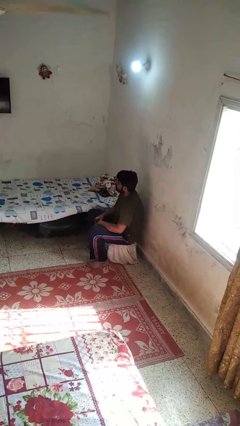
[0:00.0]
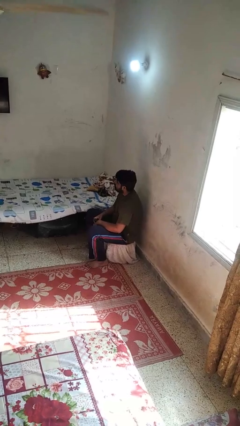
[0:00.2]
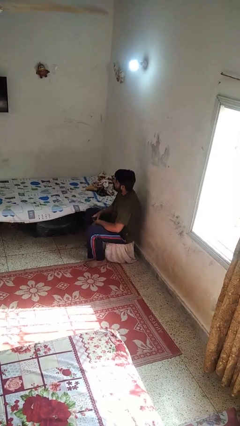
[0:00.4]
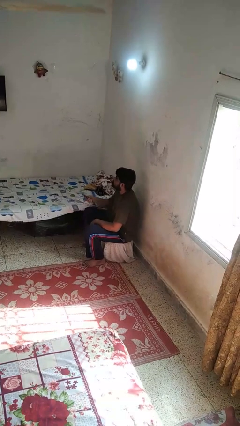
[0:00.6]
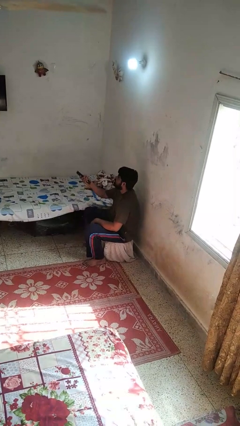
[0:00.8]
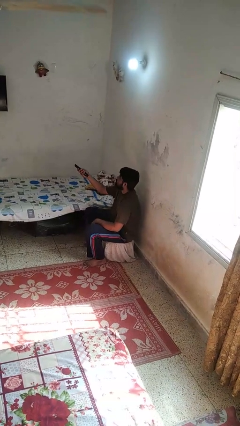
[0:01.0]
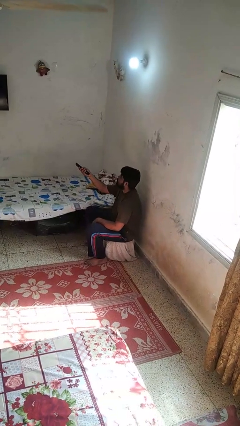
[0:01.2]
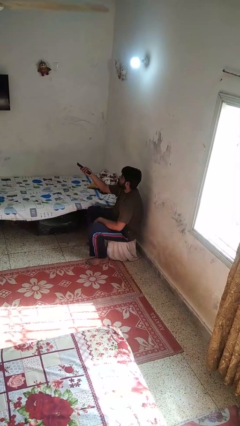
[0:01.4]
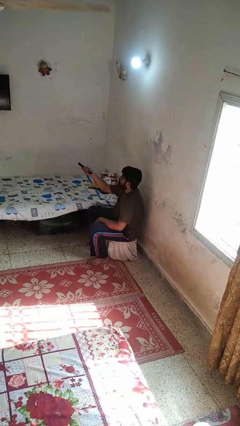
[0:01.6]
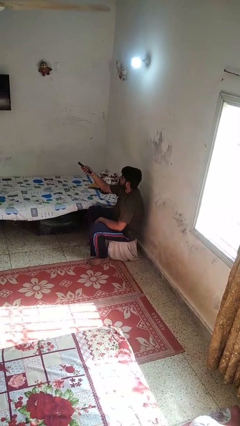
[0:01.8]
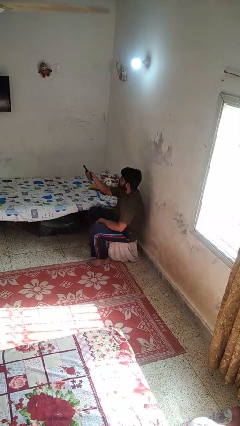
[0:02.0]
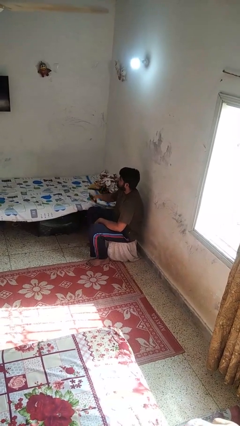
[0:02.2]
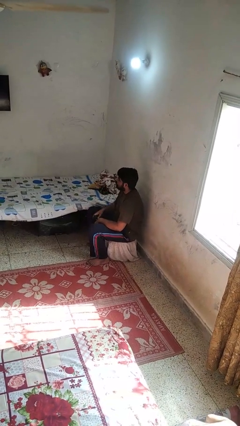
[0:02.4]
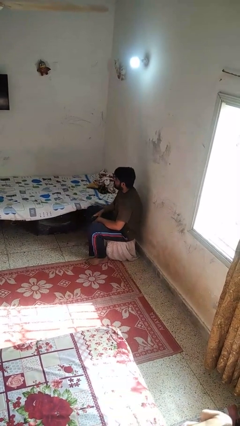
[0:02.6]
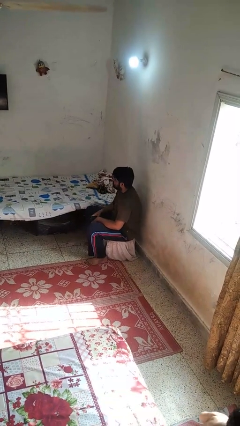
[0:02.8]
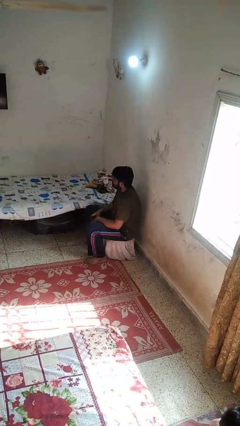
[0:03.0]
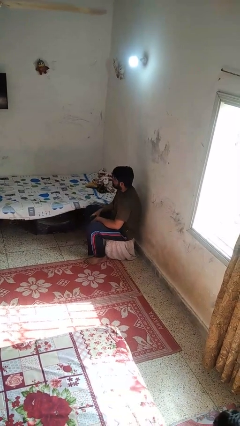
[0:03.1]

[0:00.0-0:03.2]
person uses television remote

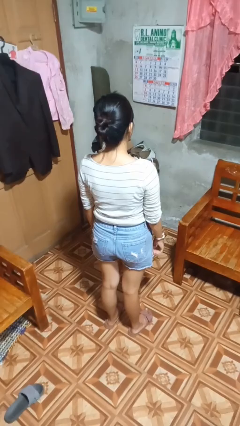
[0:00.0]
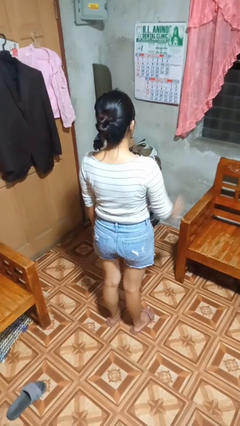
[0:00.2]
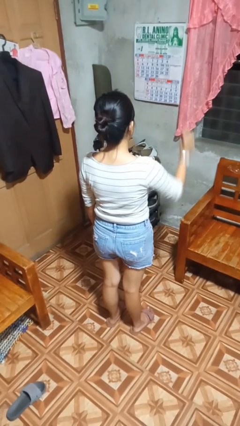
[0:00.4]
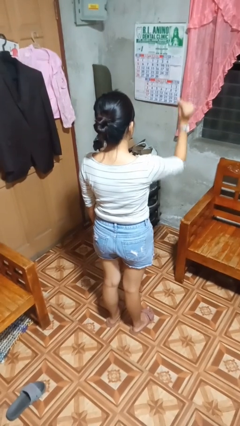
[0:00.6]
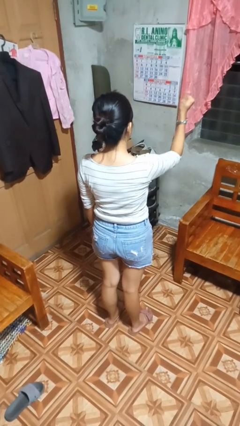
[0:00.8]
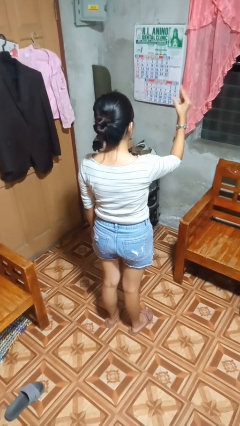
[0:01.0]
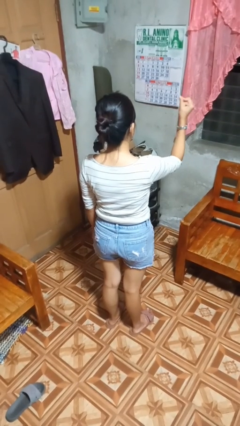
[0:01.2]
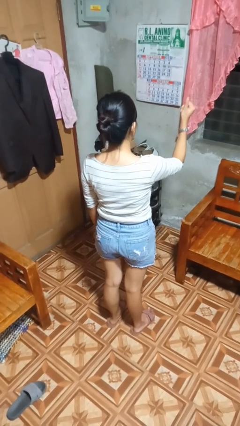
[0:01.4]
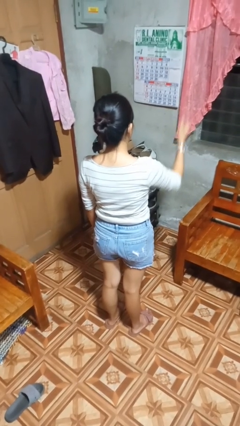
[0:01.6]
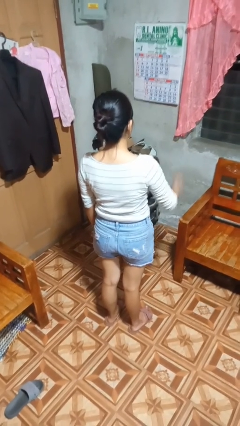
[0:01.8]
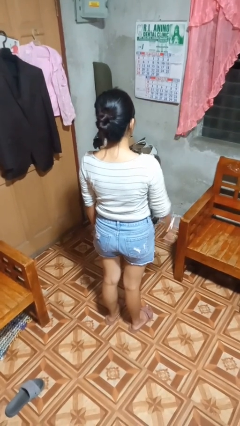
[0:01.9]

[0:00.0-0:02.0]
person snaps fingers

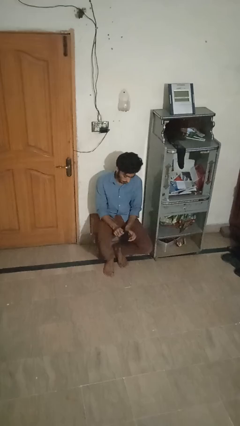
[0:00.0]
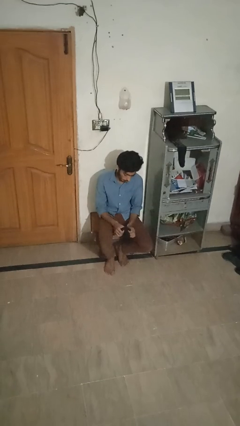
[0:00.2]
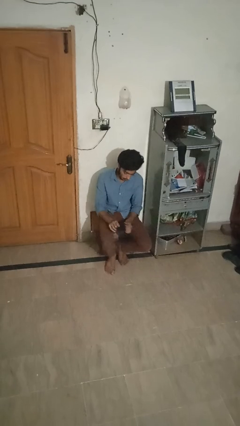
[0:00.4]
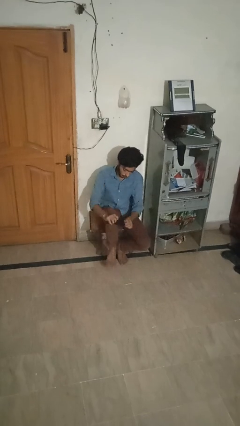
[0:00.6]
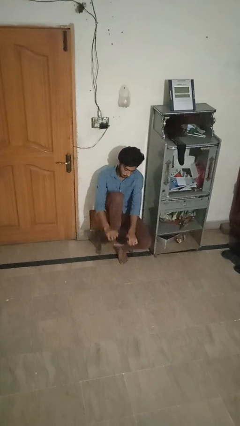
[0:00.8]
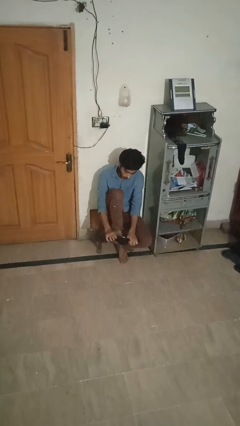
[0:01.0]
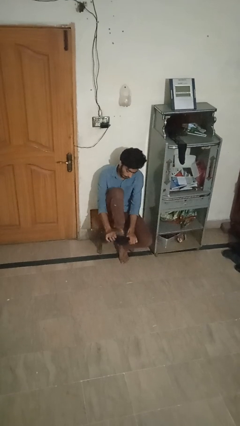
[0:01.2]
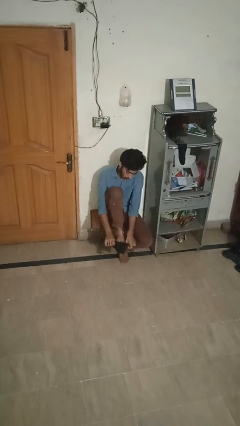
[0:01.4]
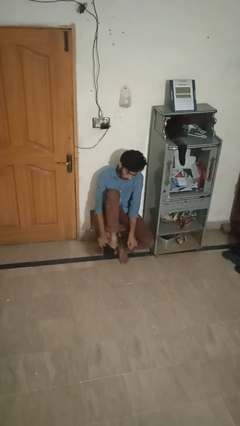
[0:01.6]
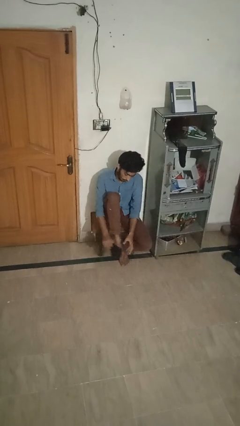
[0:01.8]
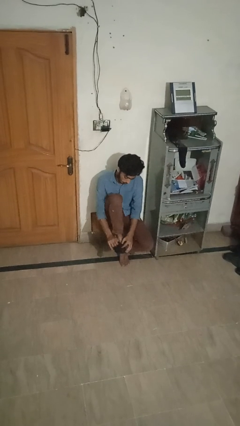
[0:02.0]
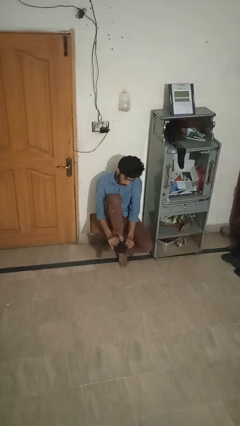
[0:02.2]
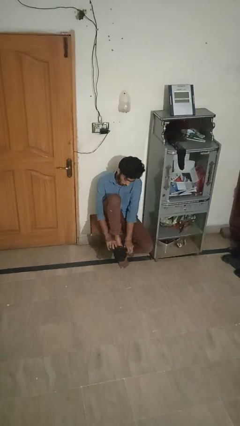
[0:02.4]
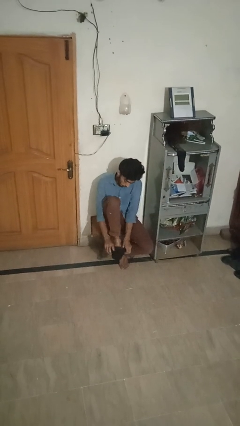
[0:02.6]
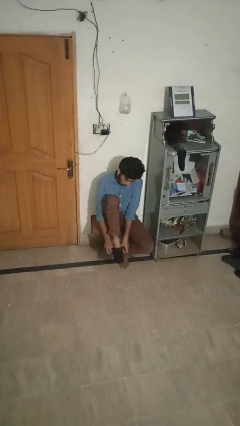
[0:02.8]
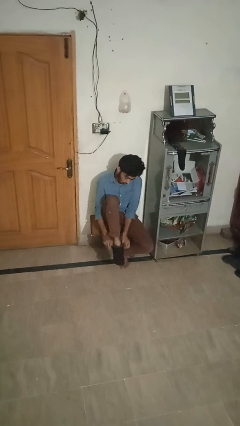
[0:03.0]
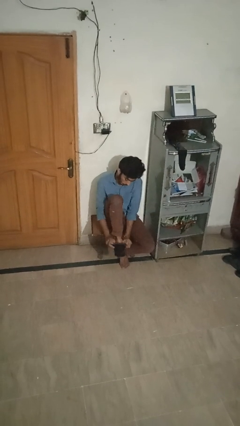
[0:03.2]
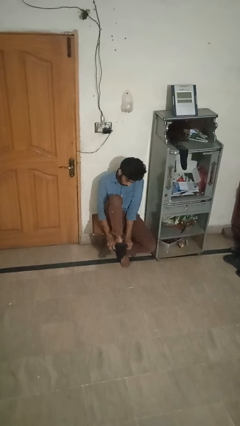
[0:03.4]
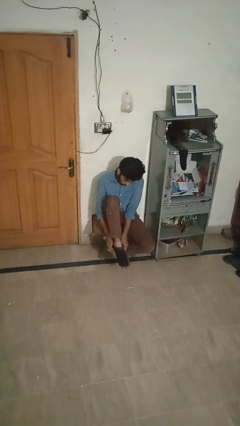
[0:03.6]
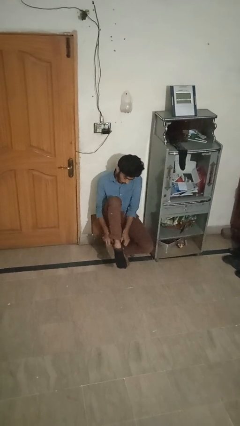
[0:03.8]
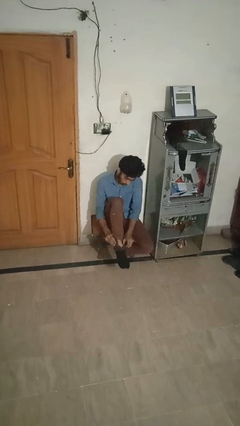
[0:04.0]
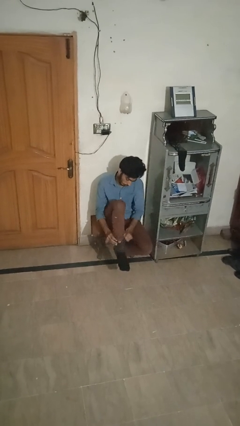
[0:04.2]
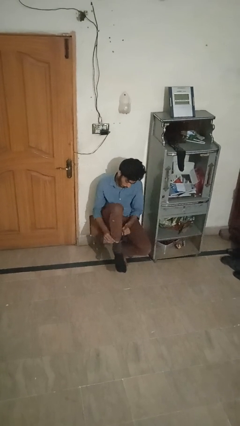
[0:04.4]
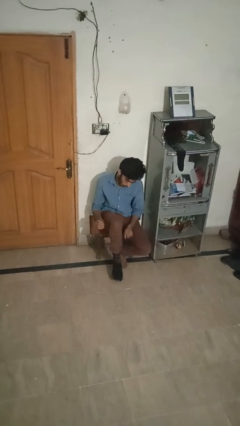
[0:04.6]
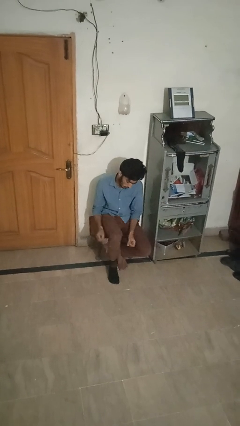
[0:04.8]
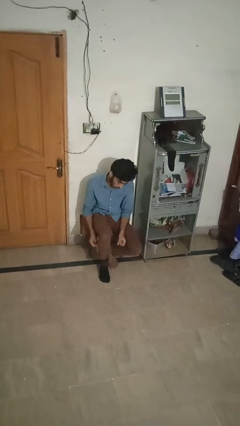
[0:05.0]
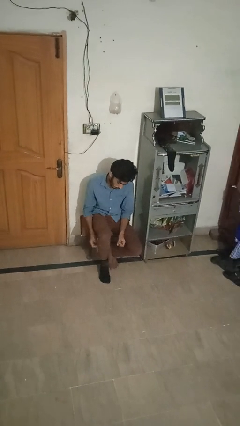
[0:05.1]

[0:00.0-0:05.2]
person puts on socks

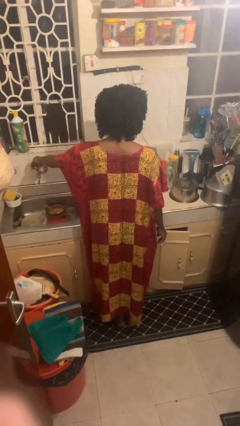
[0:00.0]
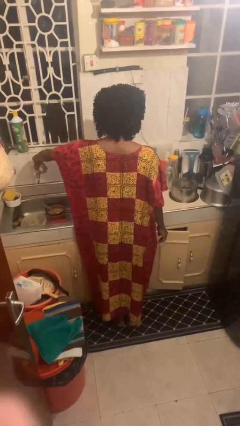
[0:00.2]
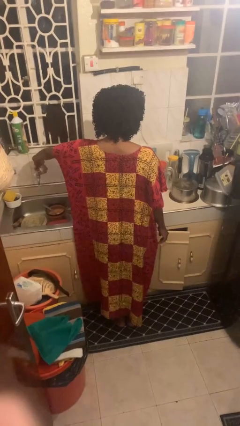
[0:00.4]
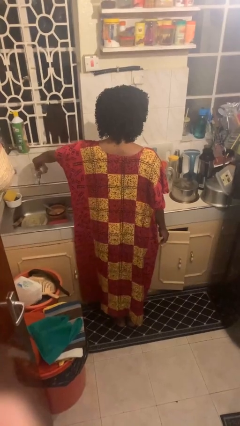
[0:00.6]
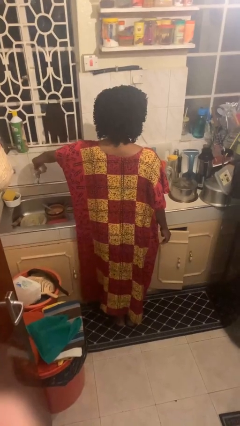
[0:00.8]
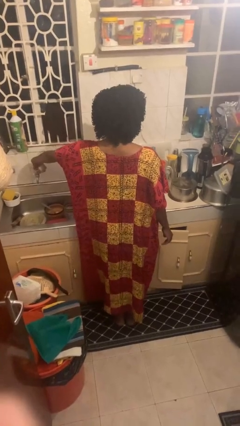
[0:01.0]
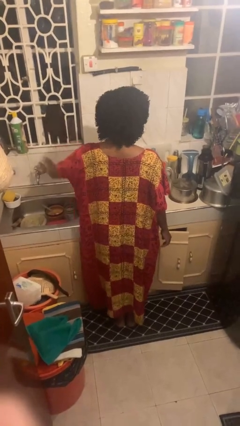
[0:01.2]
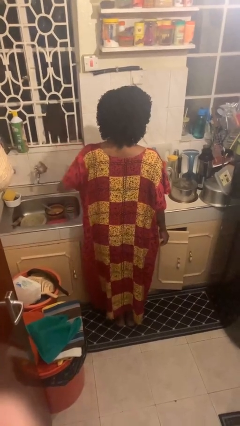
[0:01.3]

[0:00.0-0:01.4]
person turns off faucet

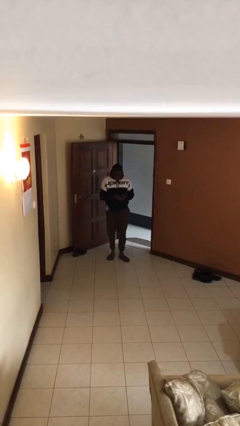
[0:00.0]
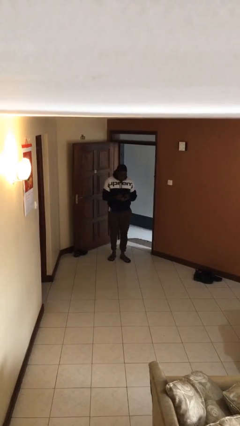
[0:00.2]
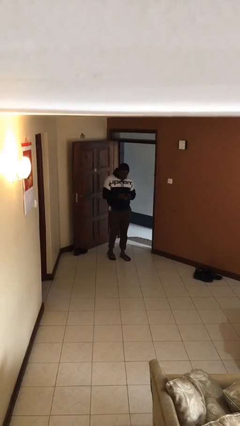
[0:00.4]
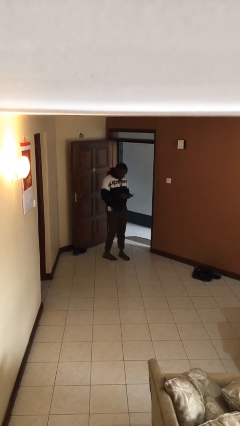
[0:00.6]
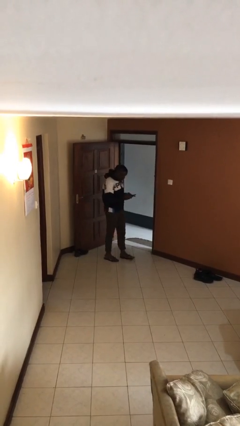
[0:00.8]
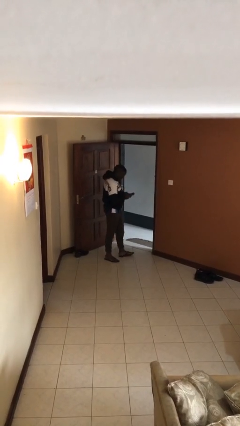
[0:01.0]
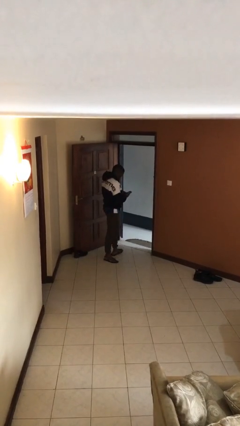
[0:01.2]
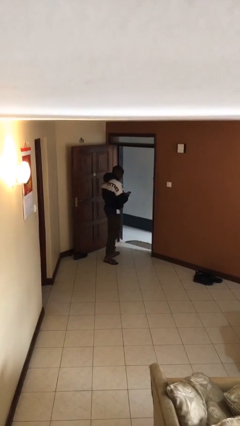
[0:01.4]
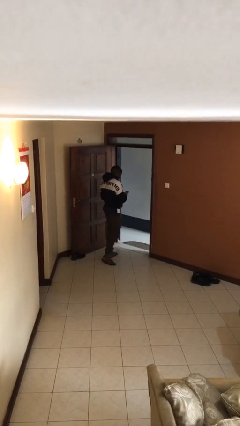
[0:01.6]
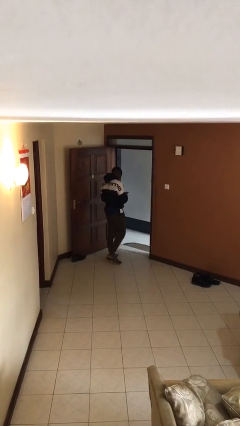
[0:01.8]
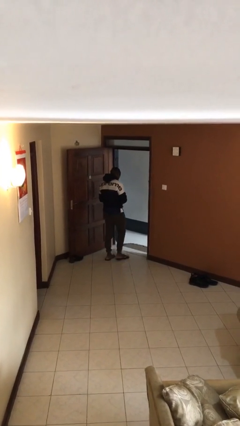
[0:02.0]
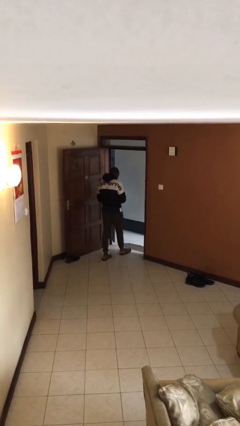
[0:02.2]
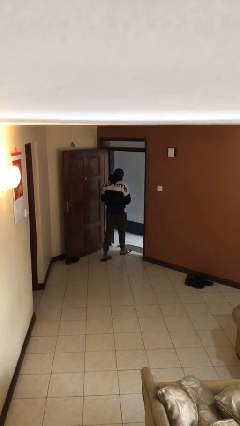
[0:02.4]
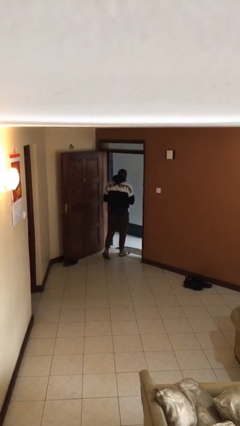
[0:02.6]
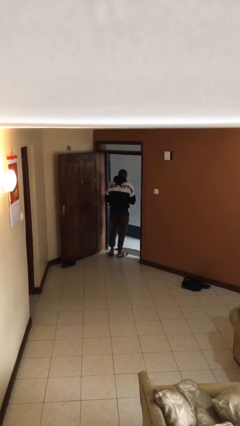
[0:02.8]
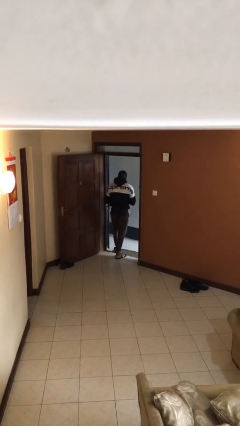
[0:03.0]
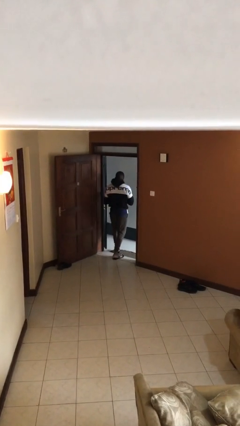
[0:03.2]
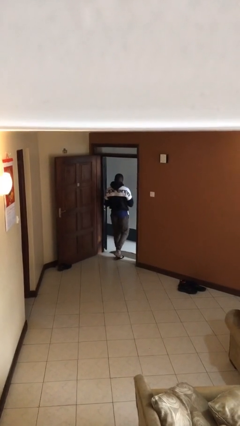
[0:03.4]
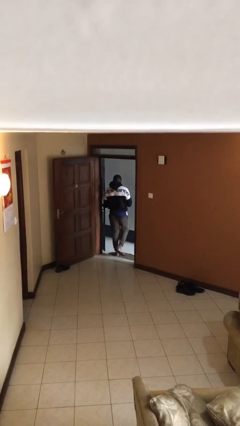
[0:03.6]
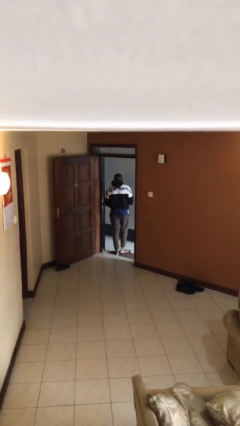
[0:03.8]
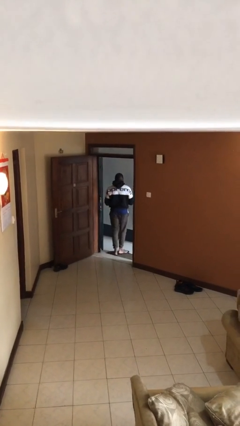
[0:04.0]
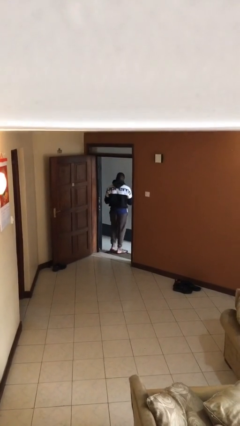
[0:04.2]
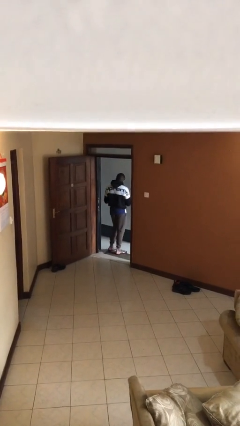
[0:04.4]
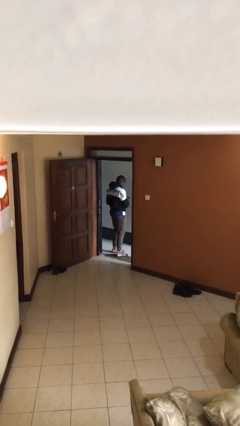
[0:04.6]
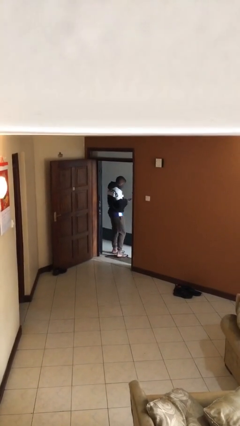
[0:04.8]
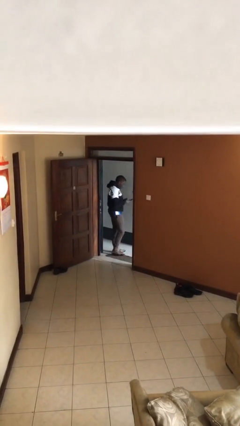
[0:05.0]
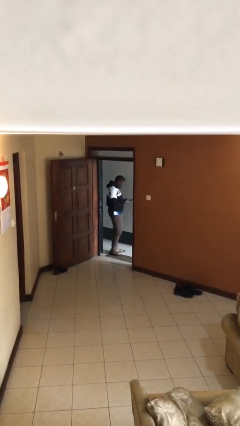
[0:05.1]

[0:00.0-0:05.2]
person exits scene through structure

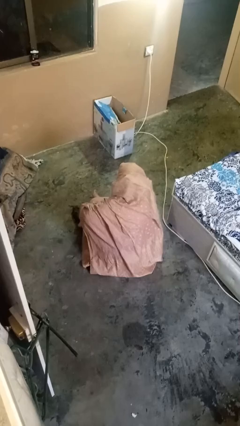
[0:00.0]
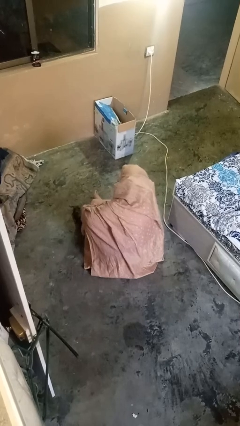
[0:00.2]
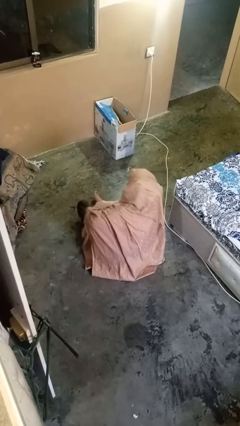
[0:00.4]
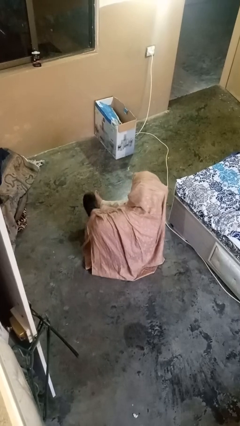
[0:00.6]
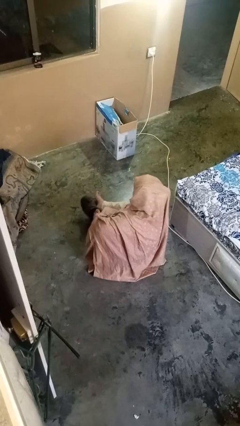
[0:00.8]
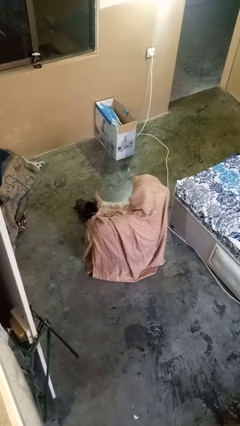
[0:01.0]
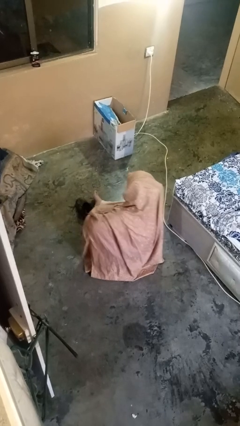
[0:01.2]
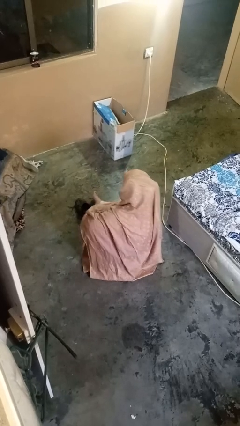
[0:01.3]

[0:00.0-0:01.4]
person takes off shoes
